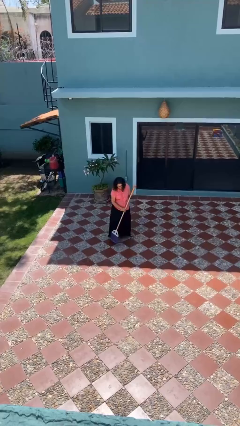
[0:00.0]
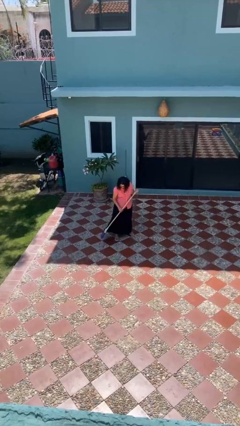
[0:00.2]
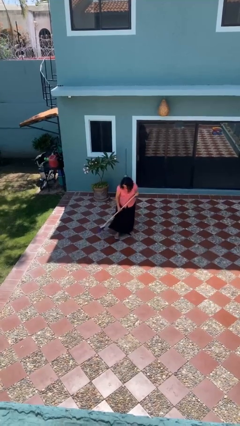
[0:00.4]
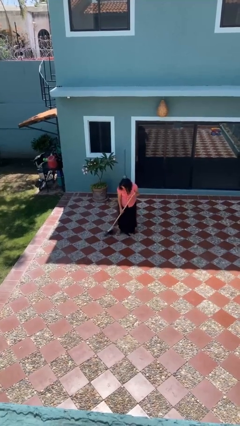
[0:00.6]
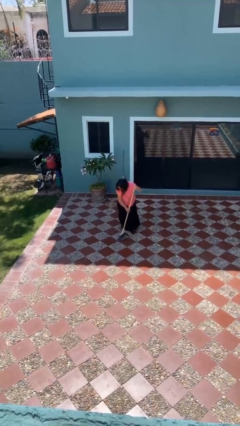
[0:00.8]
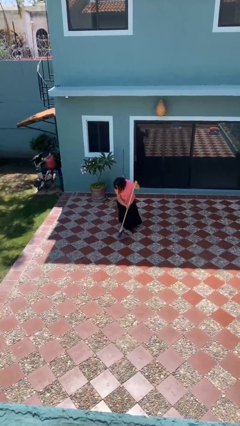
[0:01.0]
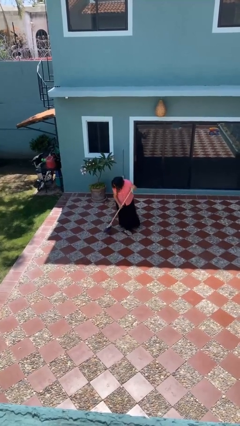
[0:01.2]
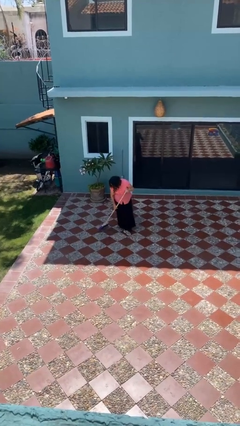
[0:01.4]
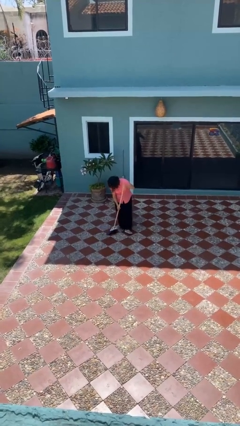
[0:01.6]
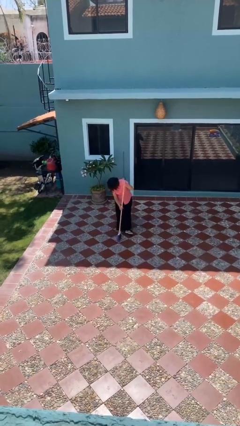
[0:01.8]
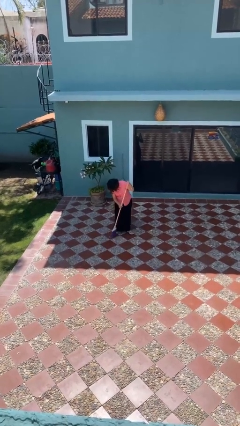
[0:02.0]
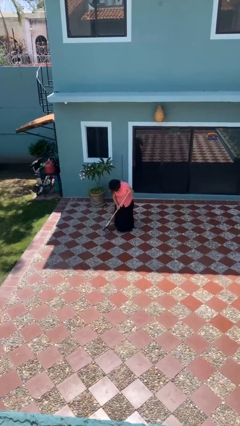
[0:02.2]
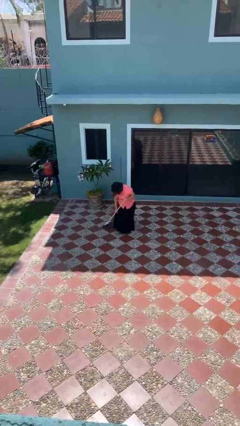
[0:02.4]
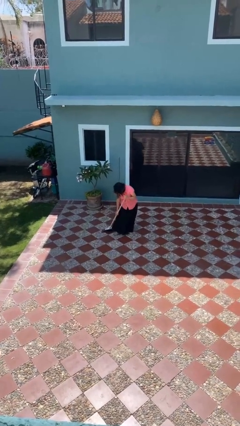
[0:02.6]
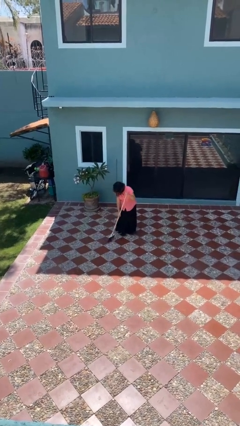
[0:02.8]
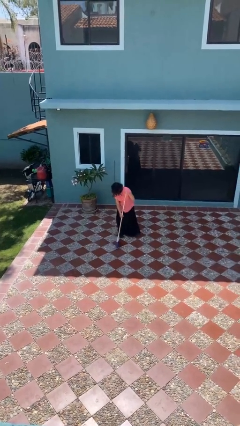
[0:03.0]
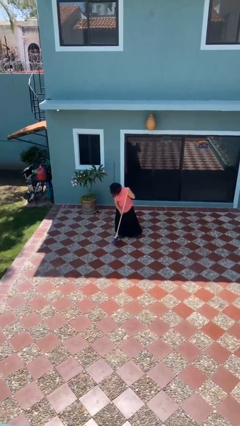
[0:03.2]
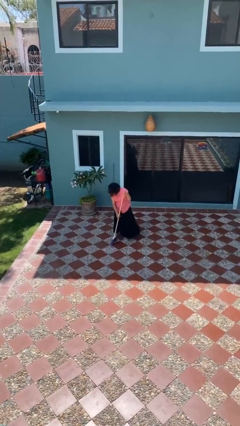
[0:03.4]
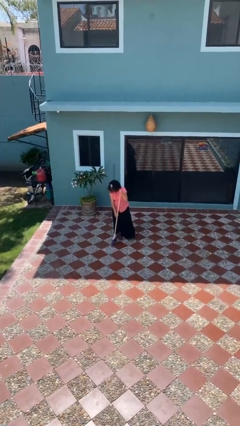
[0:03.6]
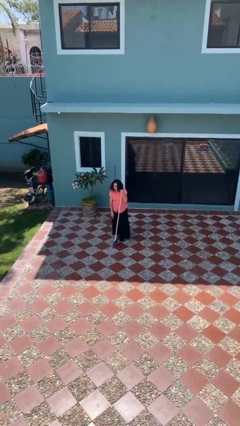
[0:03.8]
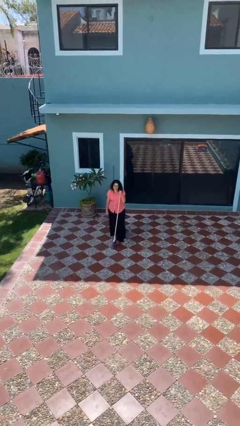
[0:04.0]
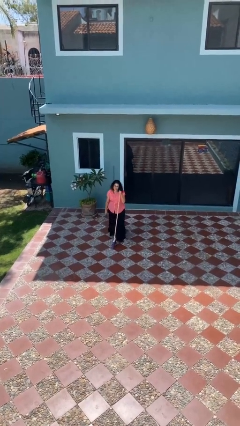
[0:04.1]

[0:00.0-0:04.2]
person sweeps floor

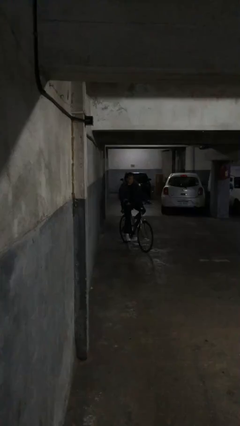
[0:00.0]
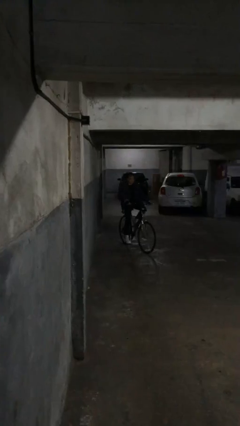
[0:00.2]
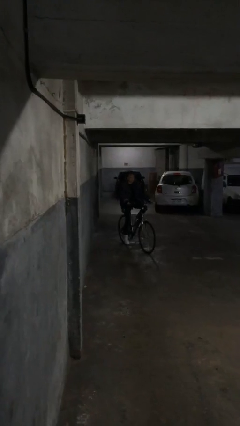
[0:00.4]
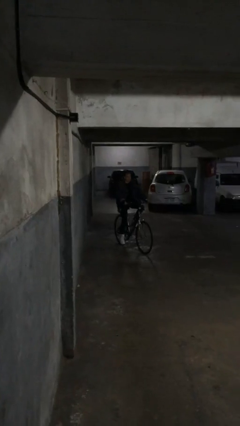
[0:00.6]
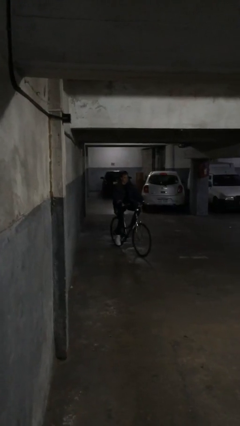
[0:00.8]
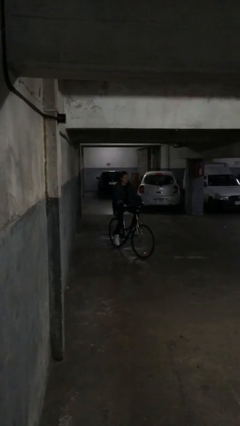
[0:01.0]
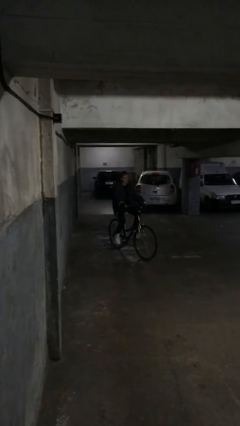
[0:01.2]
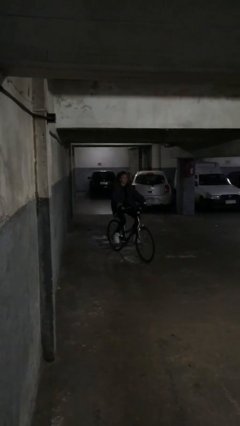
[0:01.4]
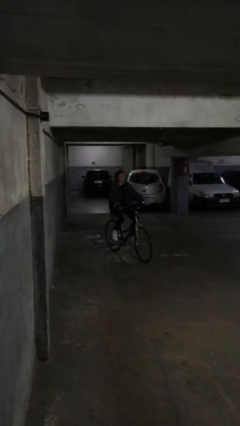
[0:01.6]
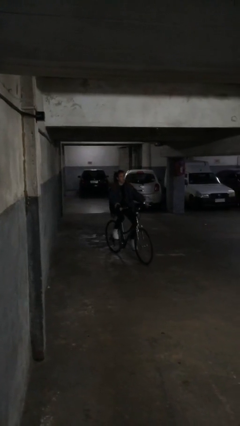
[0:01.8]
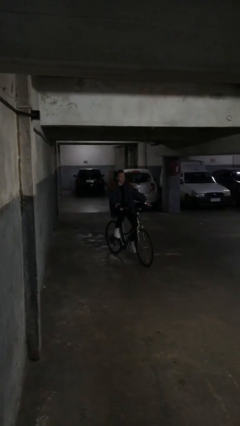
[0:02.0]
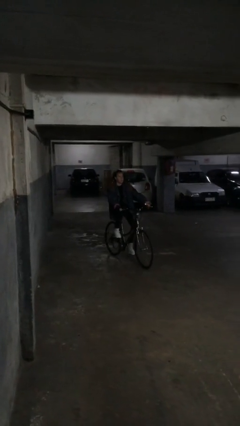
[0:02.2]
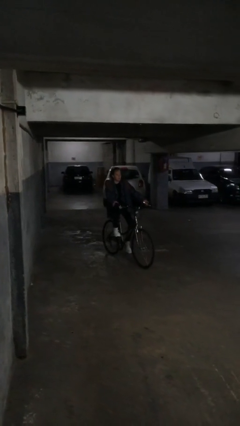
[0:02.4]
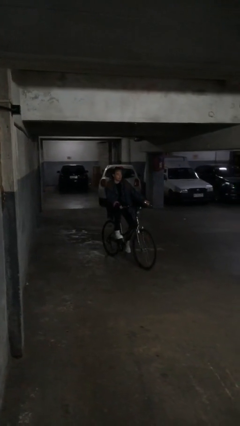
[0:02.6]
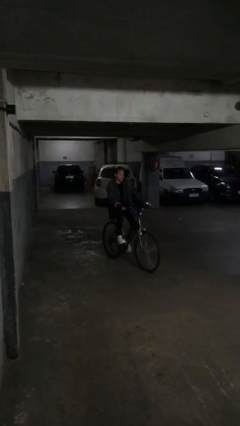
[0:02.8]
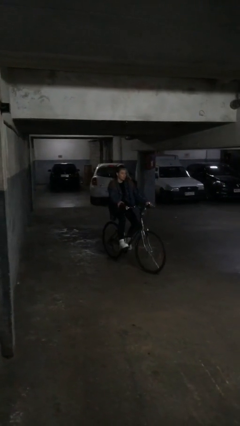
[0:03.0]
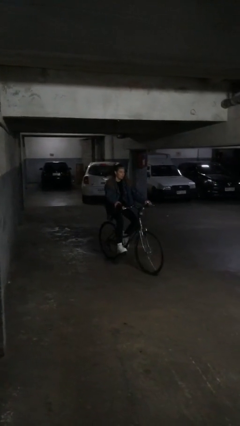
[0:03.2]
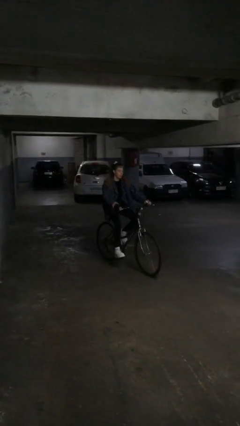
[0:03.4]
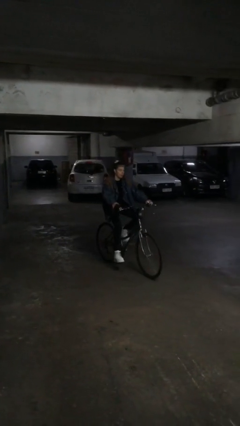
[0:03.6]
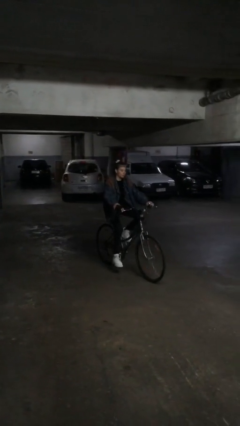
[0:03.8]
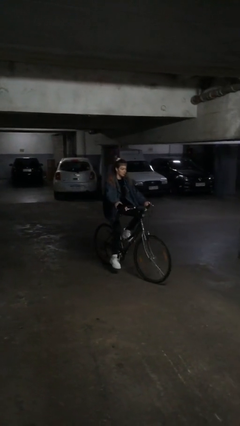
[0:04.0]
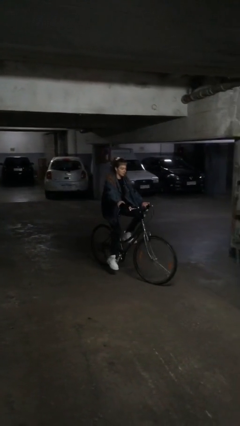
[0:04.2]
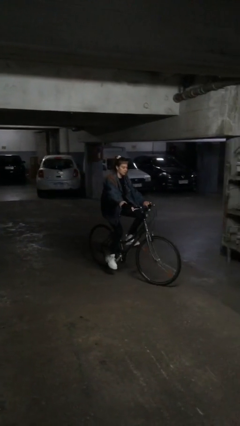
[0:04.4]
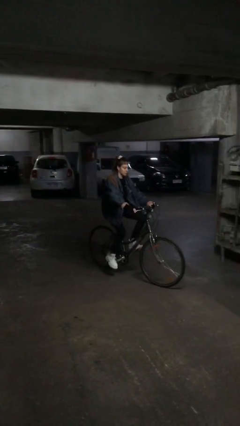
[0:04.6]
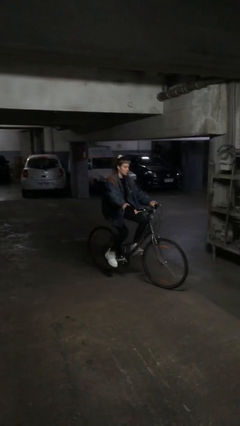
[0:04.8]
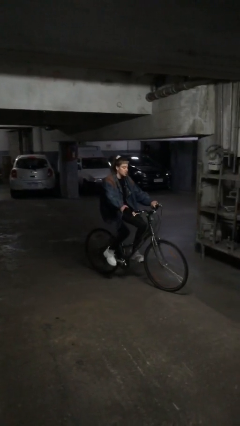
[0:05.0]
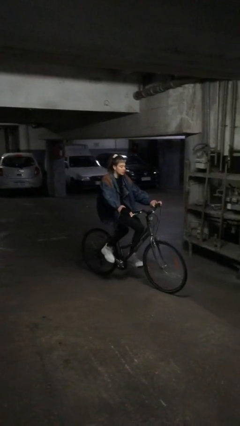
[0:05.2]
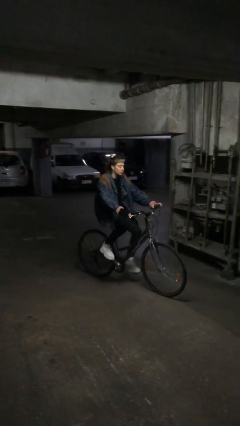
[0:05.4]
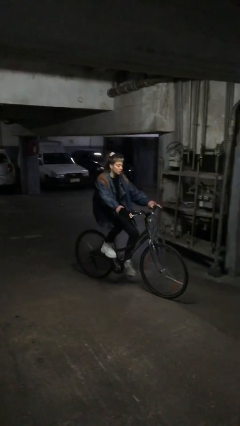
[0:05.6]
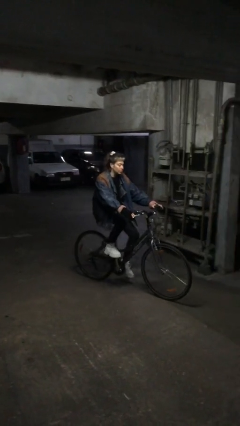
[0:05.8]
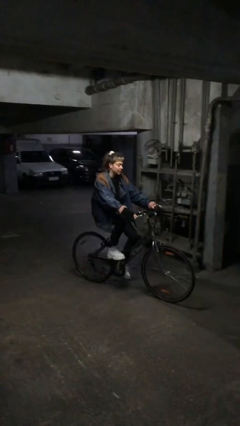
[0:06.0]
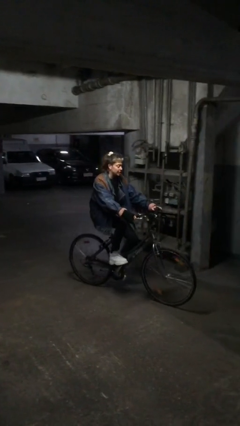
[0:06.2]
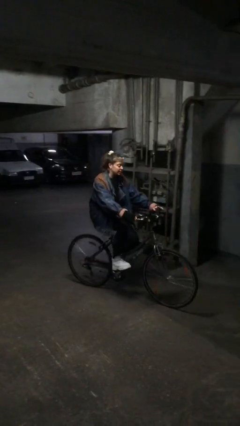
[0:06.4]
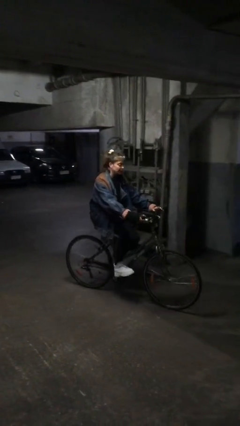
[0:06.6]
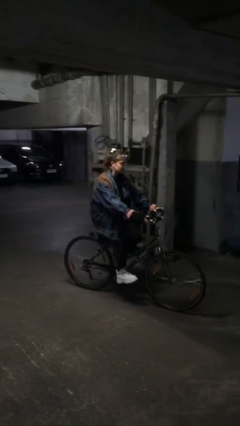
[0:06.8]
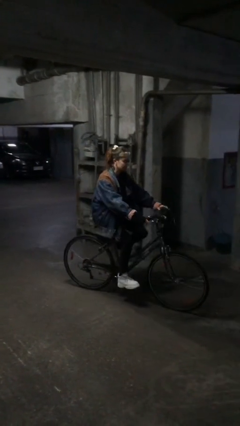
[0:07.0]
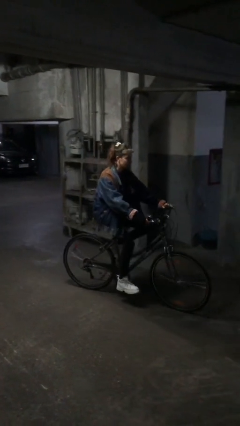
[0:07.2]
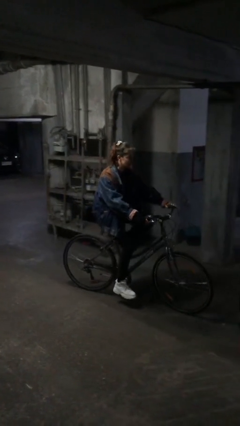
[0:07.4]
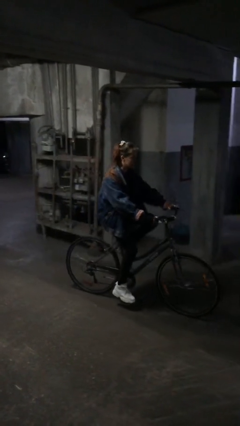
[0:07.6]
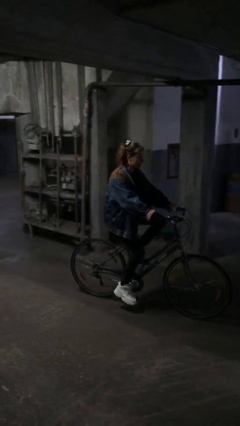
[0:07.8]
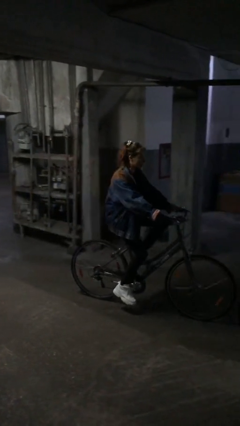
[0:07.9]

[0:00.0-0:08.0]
person rides bicycle

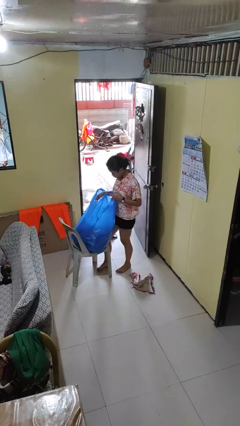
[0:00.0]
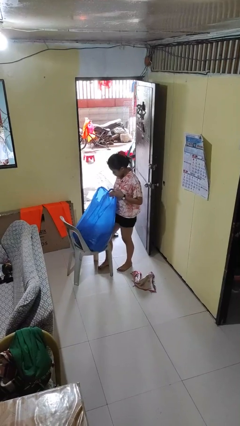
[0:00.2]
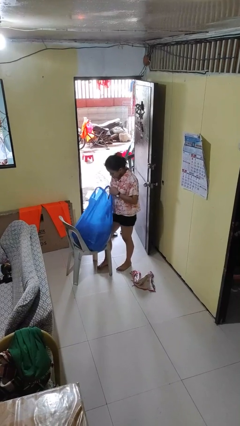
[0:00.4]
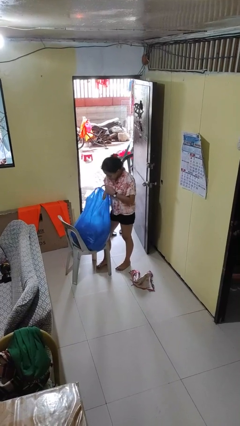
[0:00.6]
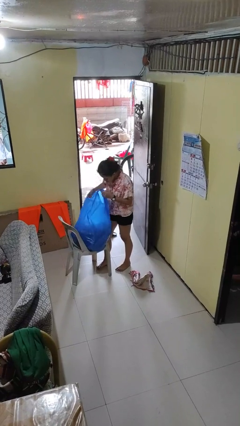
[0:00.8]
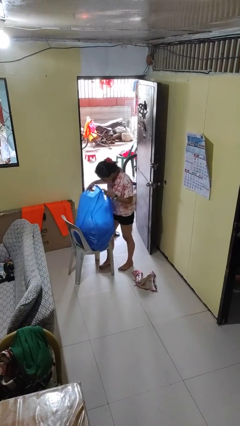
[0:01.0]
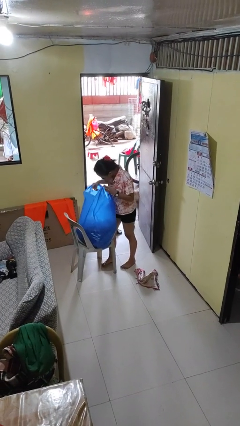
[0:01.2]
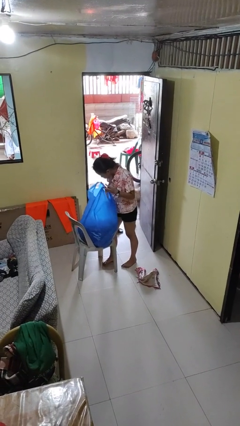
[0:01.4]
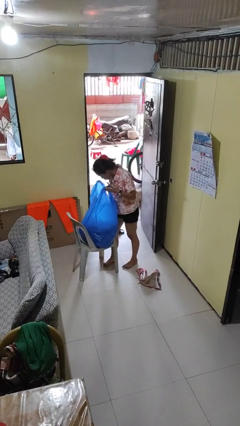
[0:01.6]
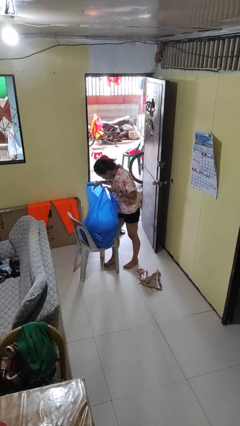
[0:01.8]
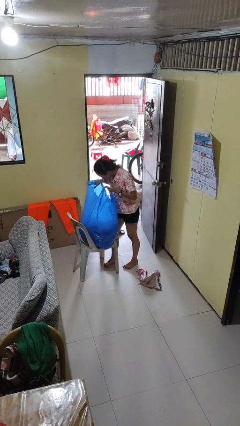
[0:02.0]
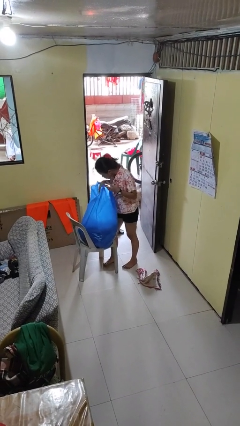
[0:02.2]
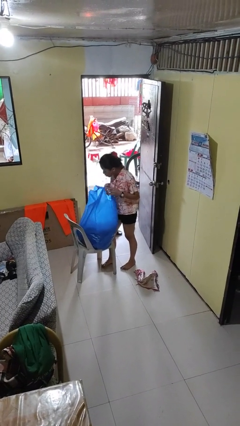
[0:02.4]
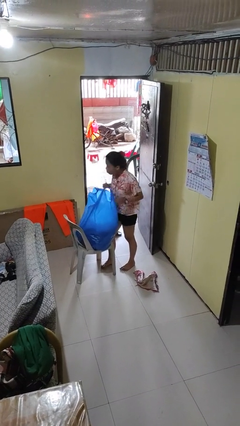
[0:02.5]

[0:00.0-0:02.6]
person searches in bag

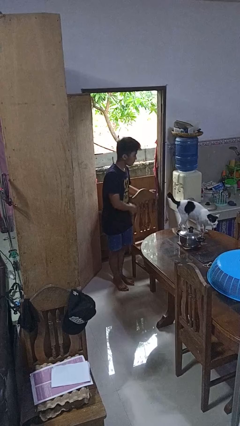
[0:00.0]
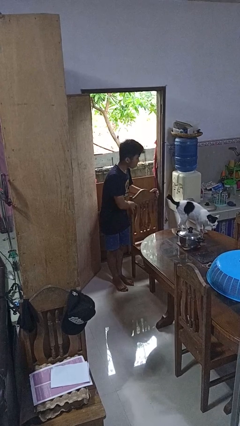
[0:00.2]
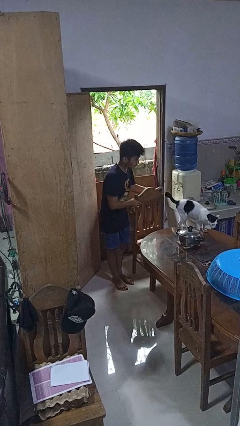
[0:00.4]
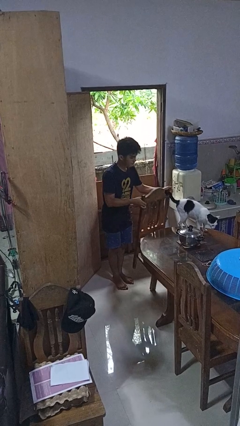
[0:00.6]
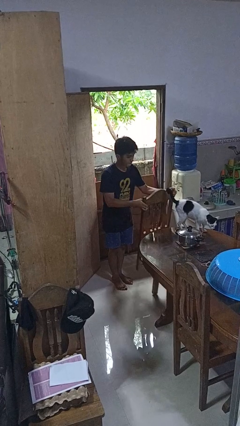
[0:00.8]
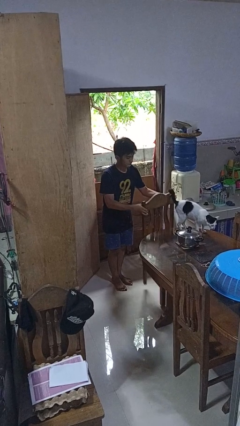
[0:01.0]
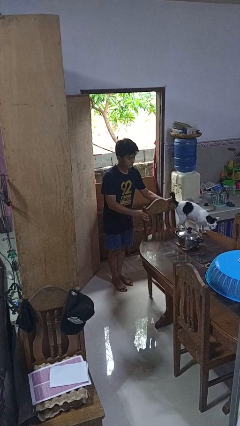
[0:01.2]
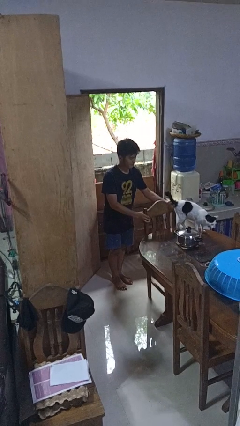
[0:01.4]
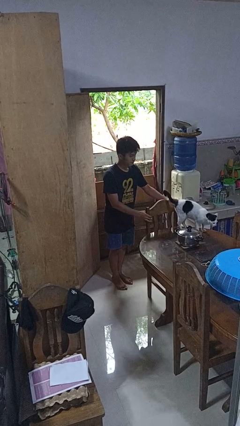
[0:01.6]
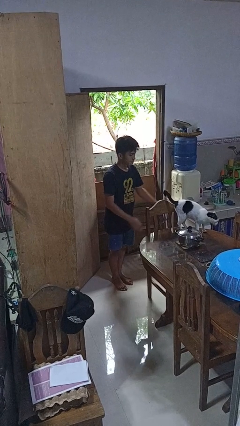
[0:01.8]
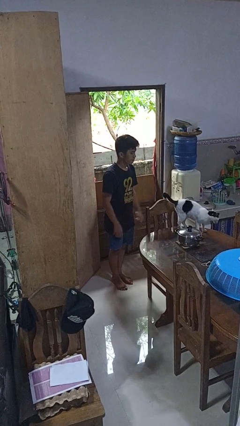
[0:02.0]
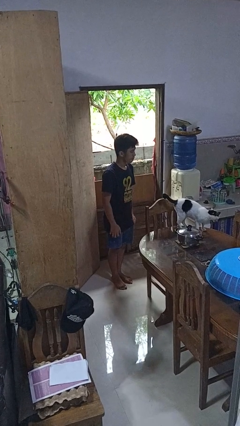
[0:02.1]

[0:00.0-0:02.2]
person pushes in chair

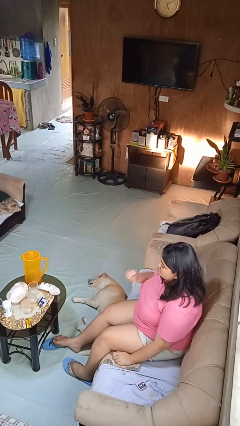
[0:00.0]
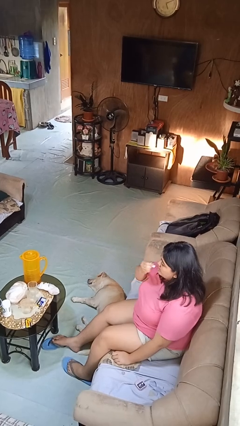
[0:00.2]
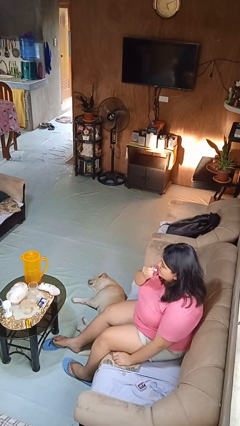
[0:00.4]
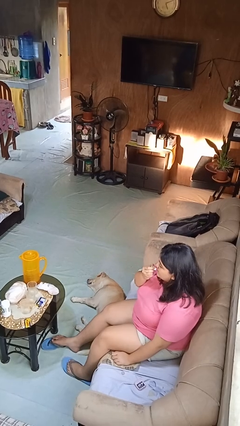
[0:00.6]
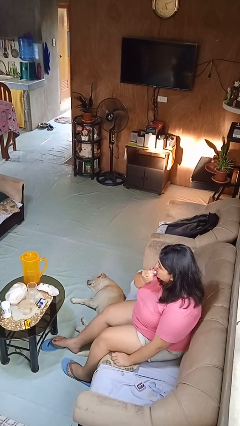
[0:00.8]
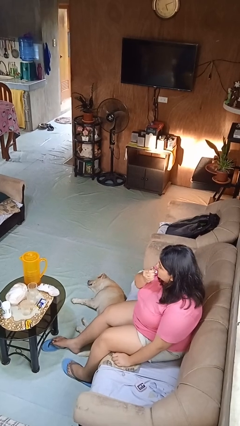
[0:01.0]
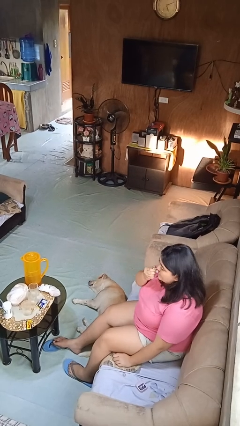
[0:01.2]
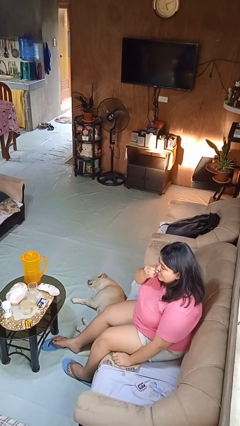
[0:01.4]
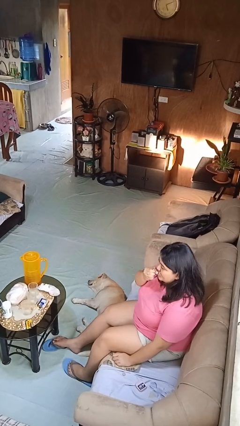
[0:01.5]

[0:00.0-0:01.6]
person applies lip makeup
